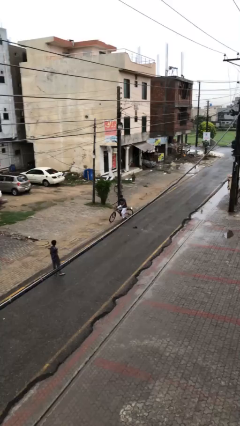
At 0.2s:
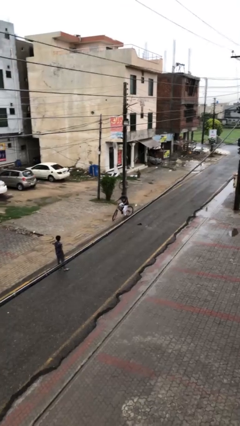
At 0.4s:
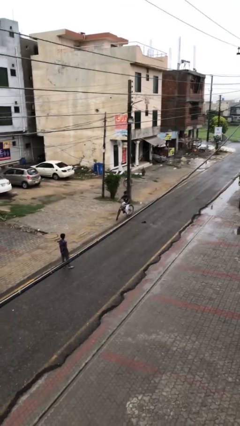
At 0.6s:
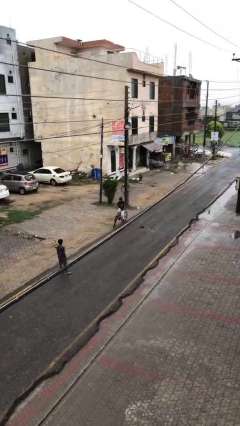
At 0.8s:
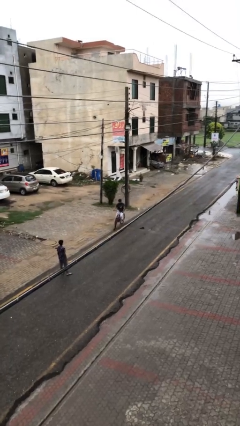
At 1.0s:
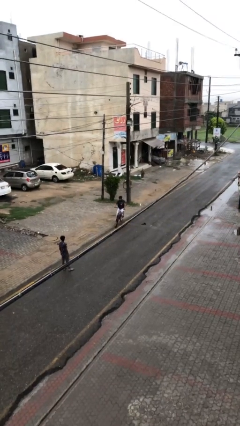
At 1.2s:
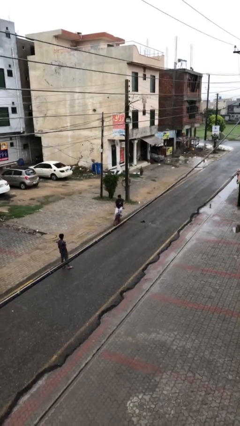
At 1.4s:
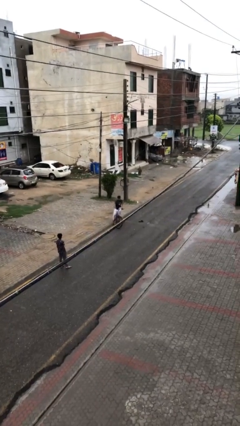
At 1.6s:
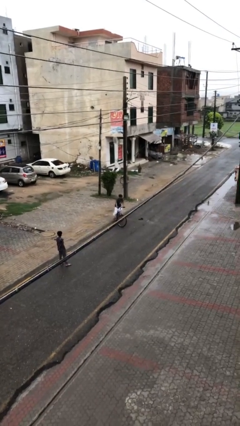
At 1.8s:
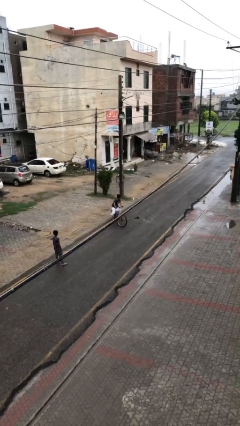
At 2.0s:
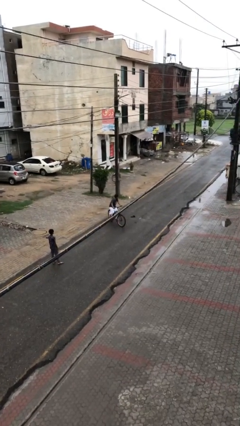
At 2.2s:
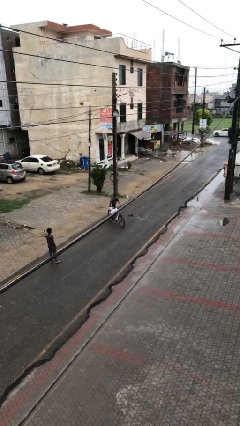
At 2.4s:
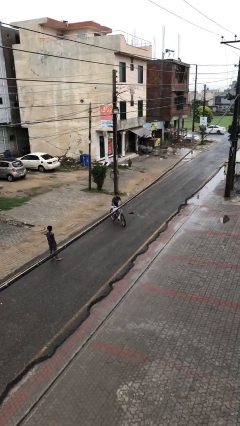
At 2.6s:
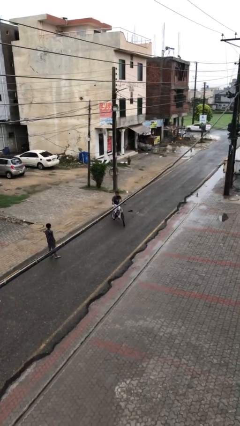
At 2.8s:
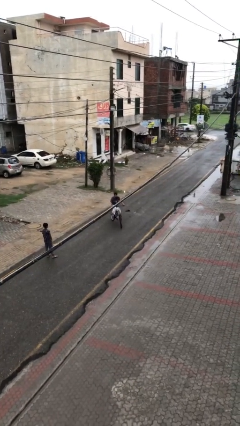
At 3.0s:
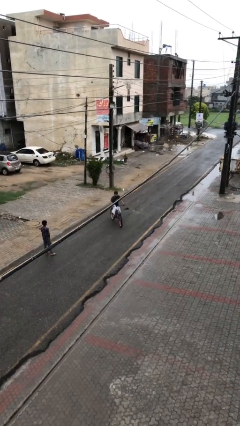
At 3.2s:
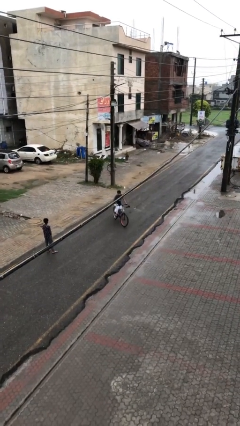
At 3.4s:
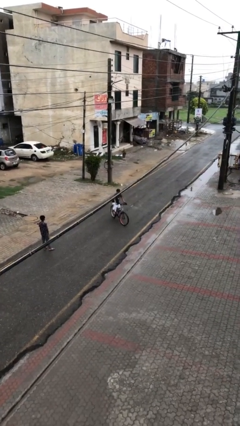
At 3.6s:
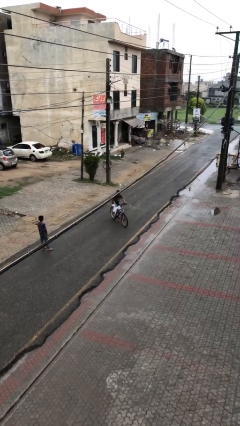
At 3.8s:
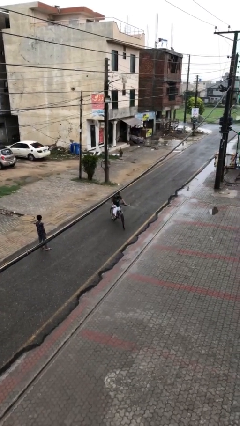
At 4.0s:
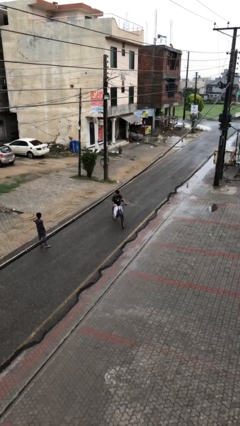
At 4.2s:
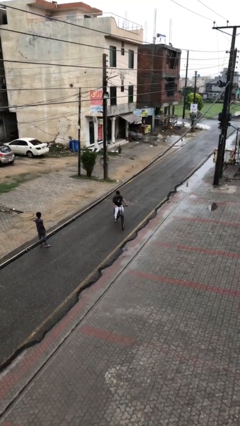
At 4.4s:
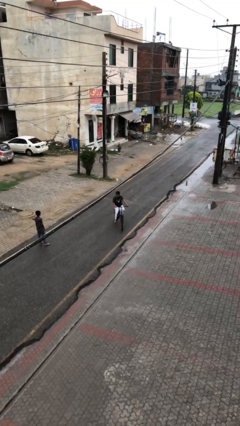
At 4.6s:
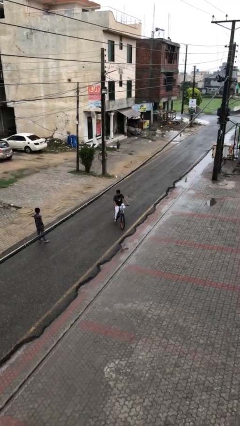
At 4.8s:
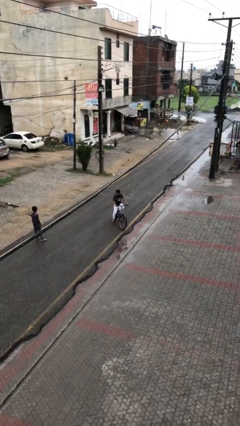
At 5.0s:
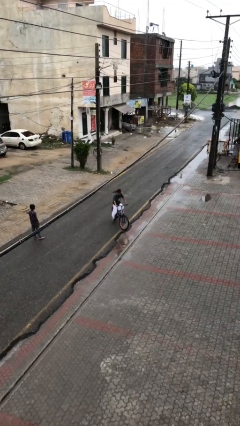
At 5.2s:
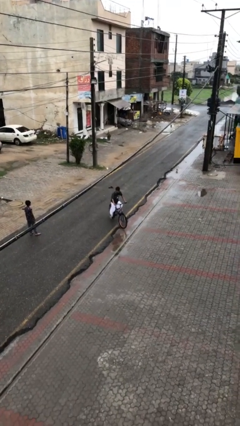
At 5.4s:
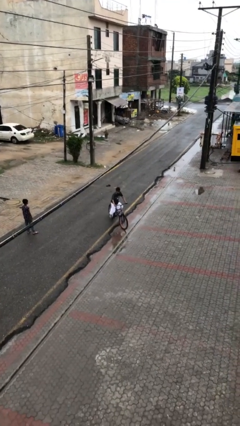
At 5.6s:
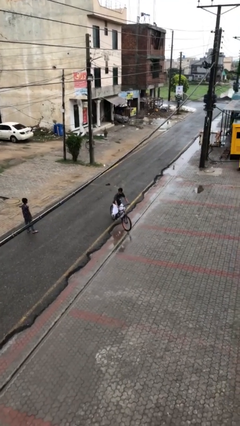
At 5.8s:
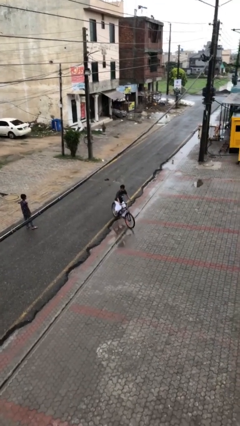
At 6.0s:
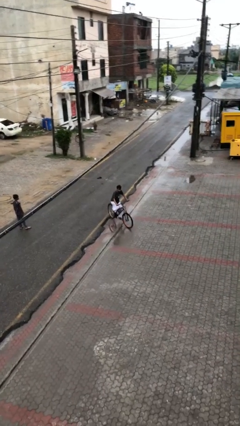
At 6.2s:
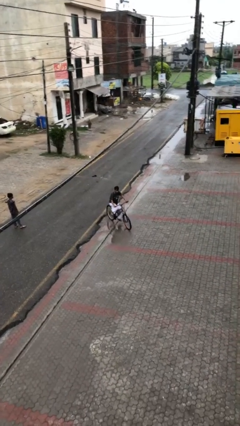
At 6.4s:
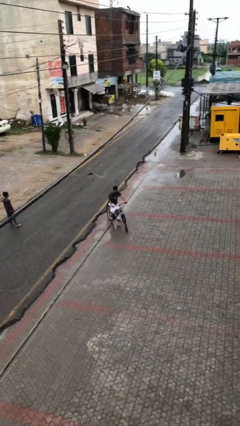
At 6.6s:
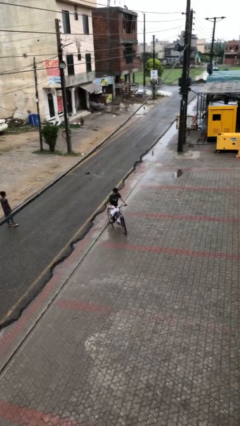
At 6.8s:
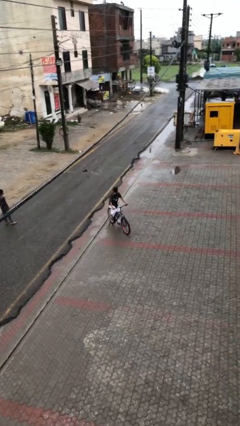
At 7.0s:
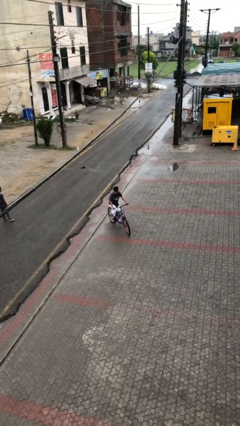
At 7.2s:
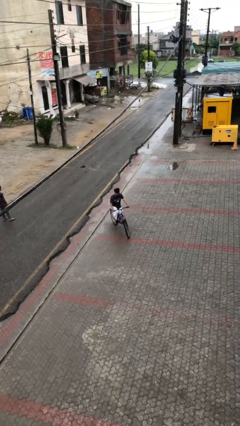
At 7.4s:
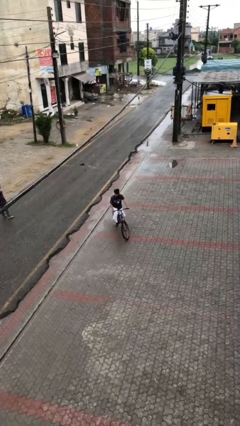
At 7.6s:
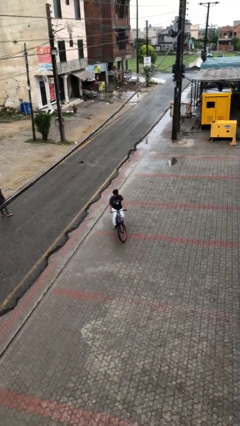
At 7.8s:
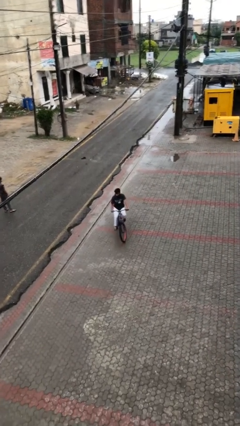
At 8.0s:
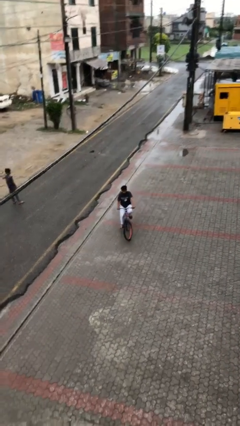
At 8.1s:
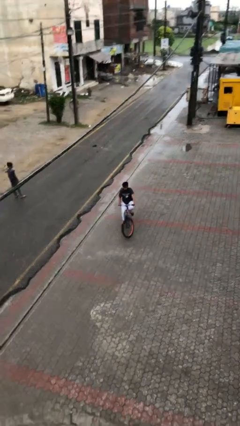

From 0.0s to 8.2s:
person rides bicycle

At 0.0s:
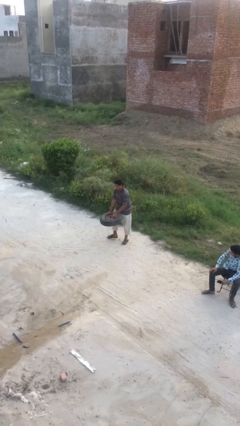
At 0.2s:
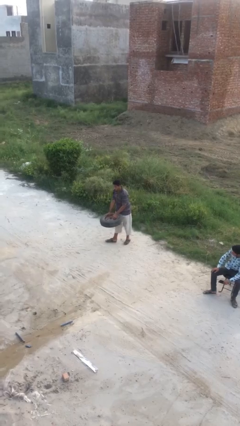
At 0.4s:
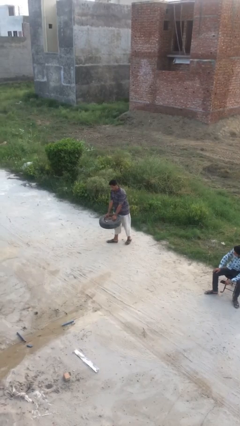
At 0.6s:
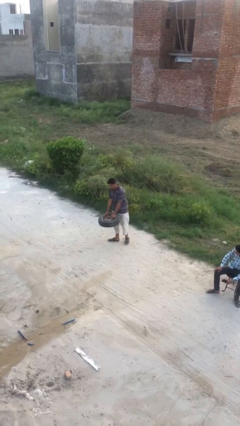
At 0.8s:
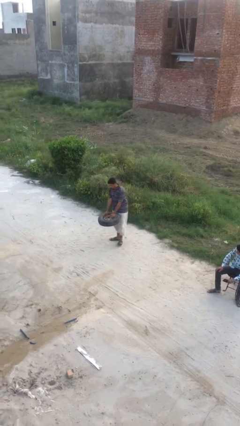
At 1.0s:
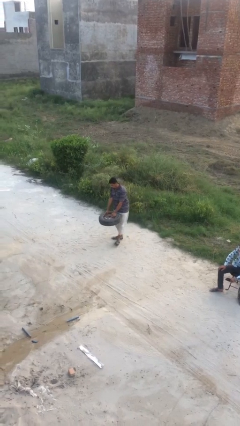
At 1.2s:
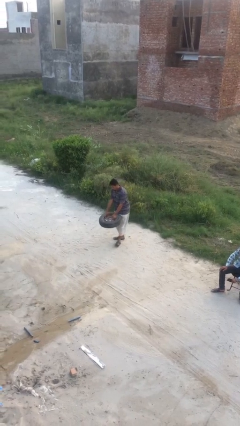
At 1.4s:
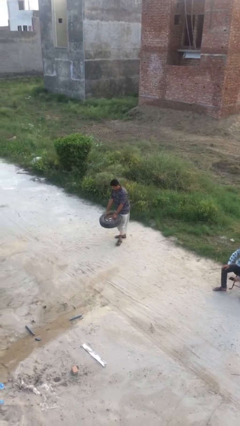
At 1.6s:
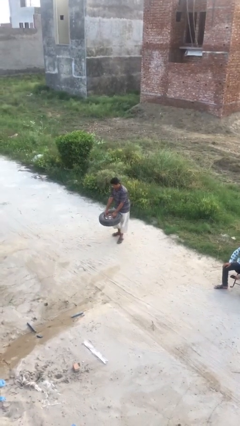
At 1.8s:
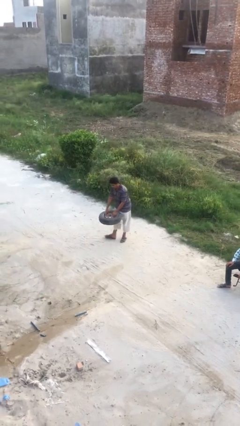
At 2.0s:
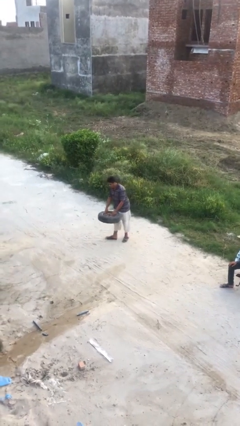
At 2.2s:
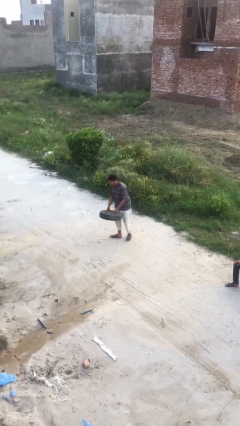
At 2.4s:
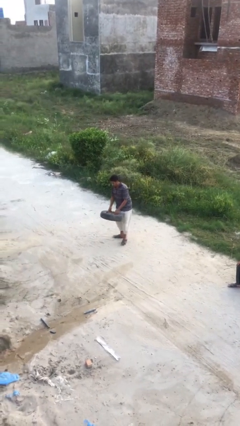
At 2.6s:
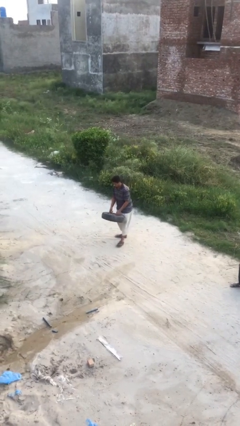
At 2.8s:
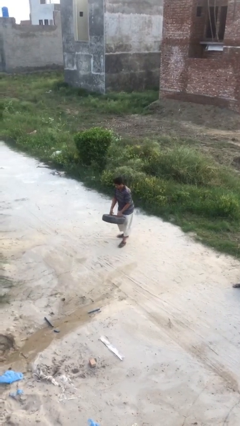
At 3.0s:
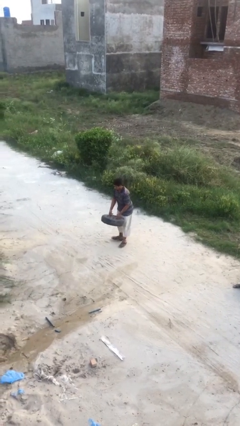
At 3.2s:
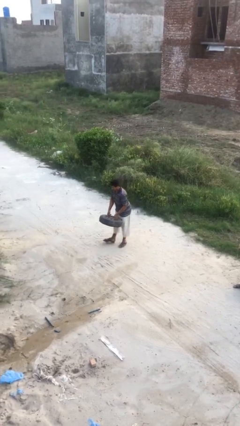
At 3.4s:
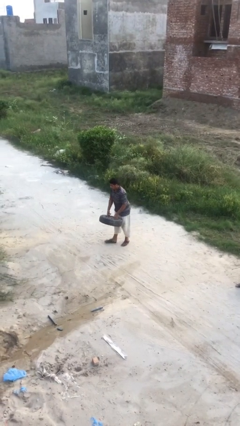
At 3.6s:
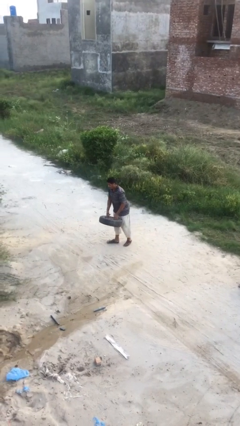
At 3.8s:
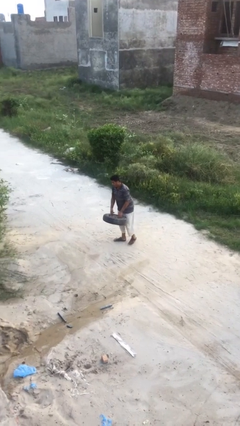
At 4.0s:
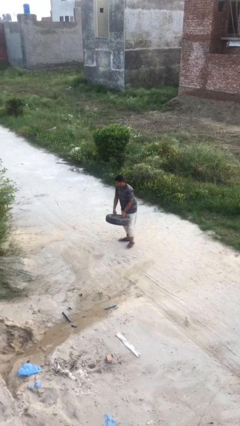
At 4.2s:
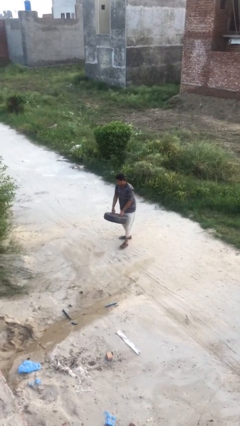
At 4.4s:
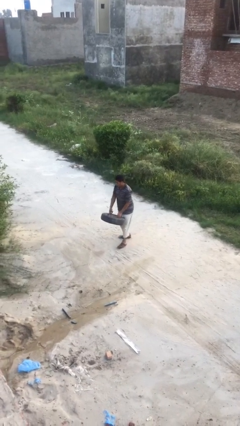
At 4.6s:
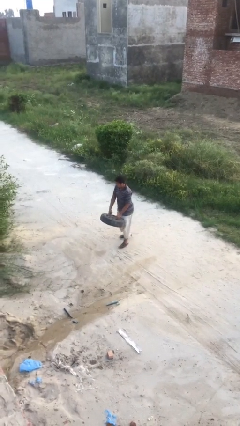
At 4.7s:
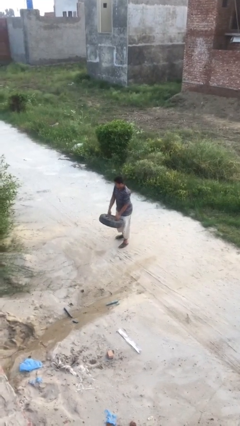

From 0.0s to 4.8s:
person carries heavy object

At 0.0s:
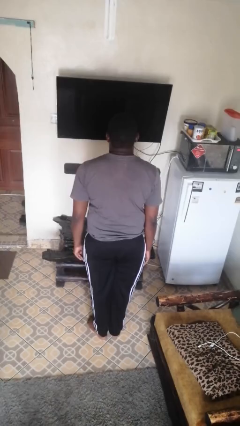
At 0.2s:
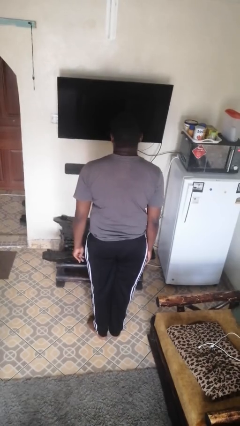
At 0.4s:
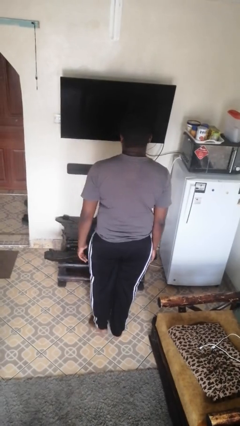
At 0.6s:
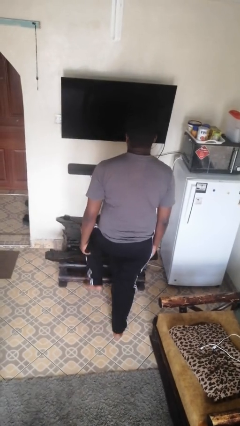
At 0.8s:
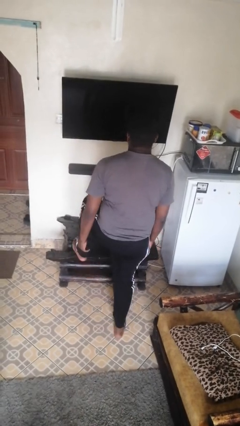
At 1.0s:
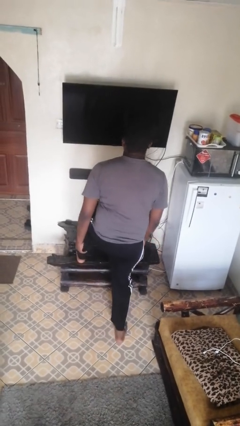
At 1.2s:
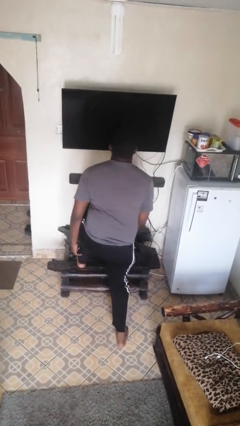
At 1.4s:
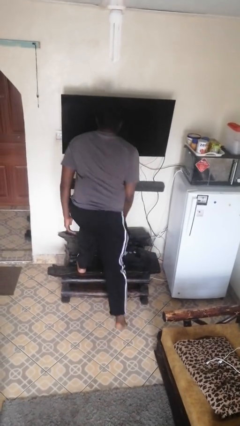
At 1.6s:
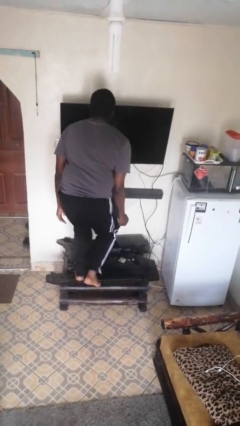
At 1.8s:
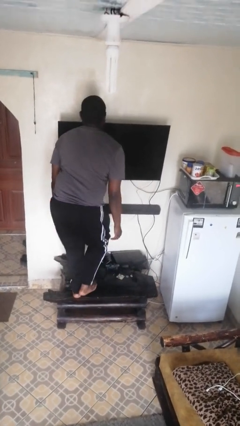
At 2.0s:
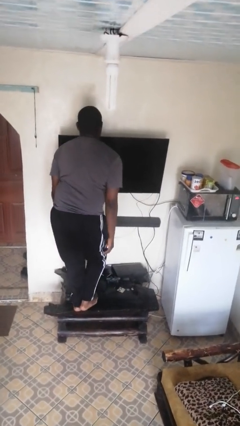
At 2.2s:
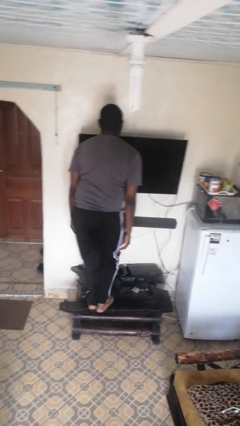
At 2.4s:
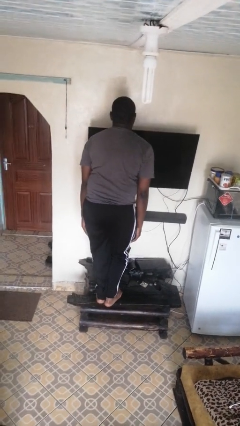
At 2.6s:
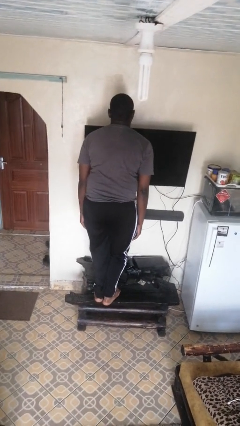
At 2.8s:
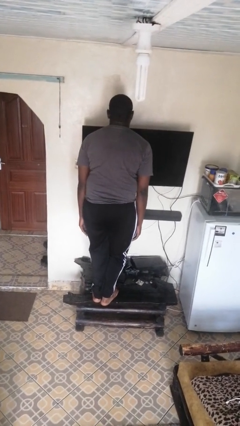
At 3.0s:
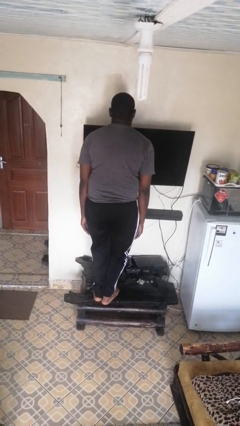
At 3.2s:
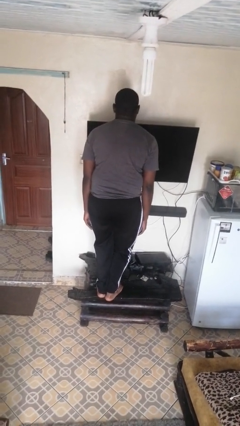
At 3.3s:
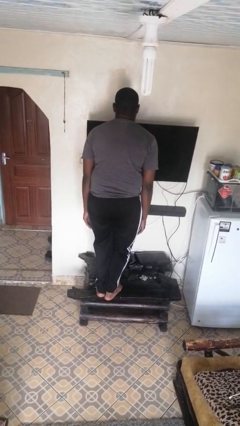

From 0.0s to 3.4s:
person climbs on table

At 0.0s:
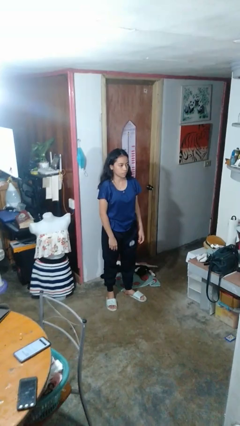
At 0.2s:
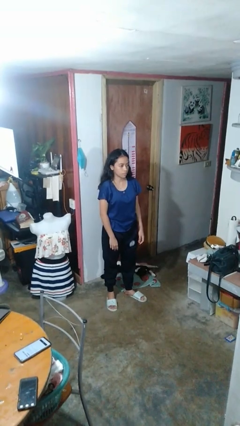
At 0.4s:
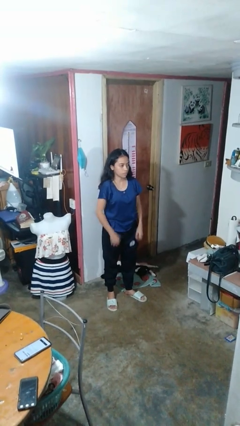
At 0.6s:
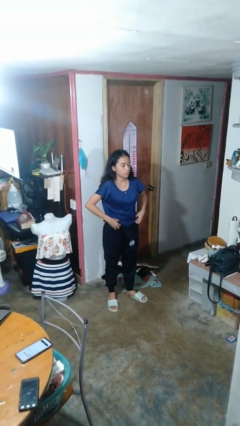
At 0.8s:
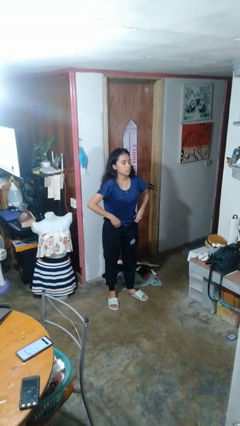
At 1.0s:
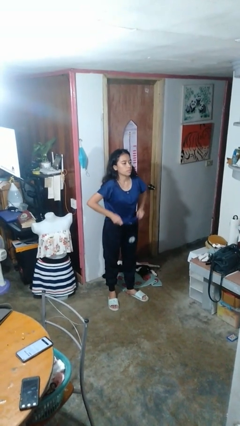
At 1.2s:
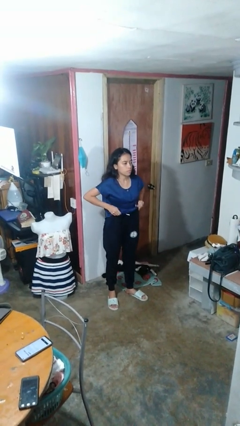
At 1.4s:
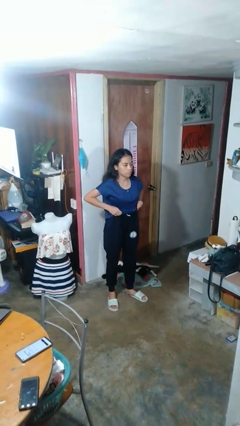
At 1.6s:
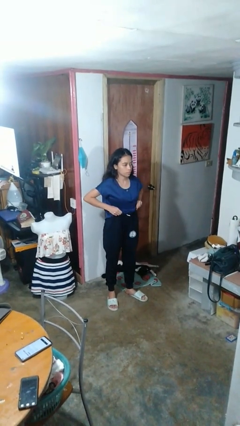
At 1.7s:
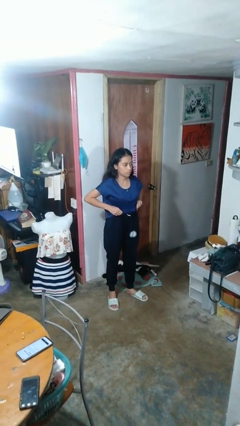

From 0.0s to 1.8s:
person hikes up pants
